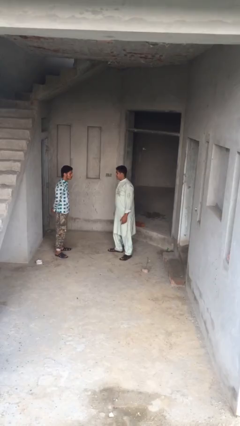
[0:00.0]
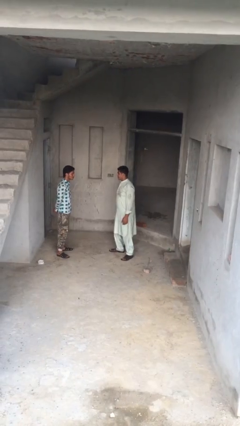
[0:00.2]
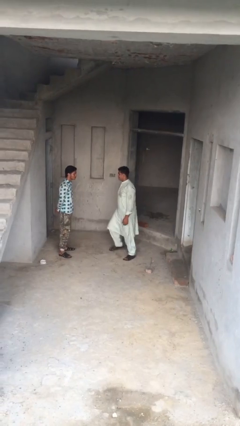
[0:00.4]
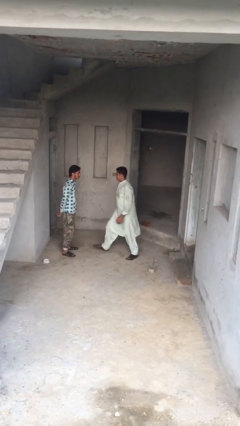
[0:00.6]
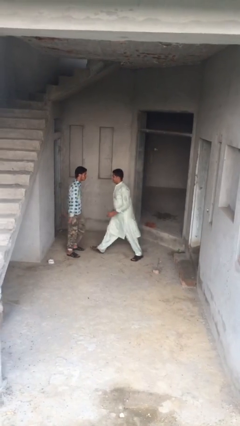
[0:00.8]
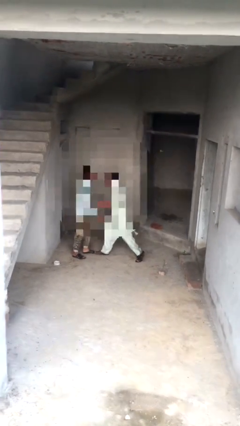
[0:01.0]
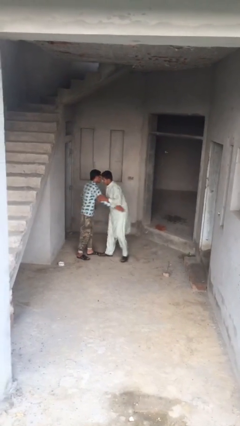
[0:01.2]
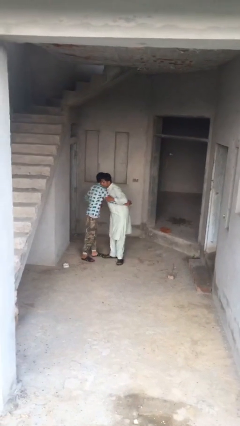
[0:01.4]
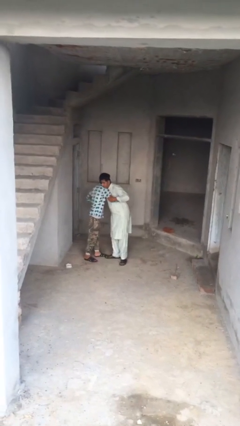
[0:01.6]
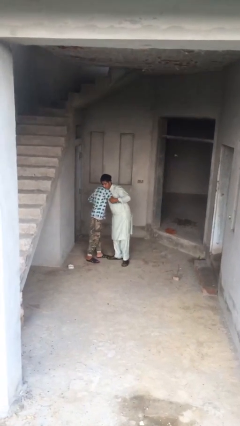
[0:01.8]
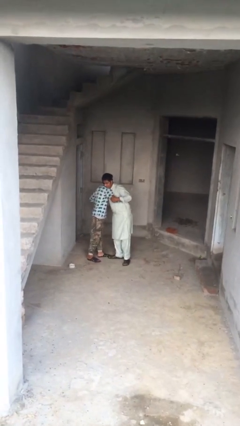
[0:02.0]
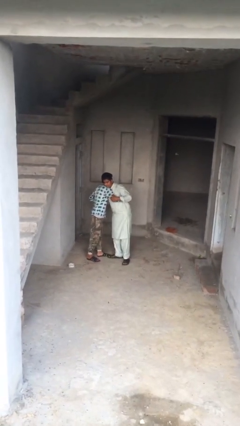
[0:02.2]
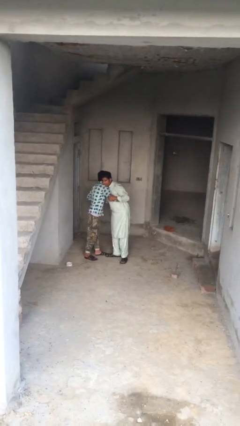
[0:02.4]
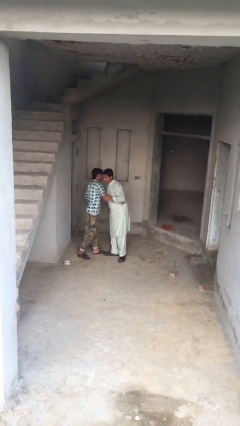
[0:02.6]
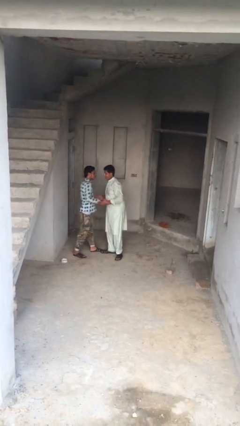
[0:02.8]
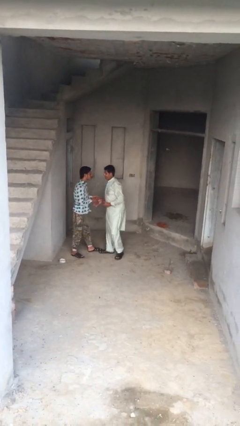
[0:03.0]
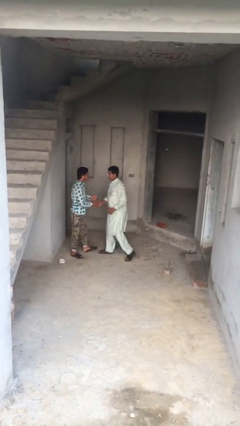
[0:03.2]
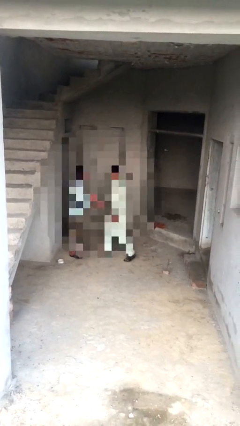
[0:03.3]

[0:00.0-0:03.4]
person embraces person

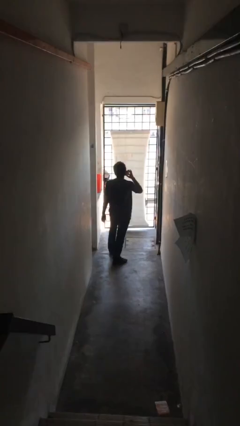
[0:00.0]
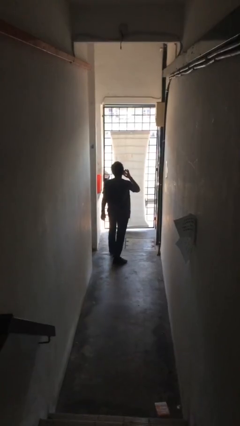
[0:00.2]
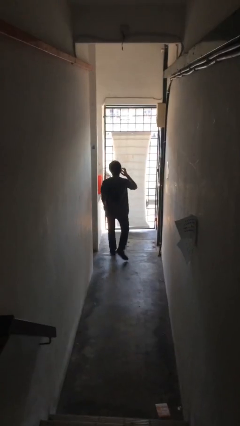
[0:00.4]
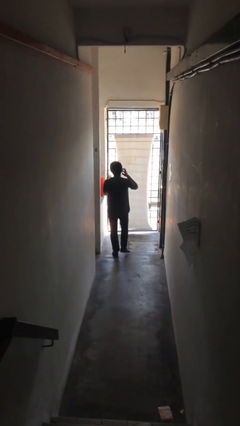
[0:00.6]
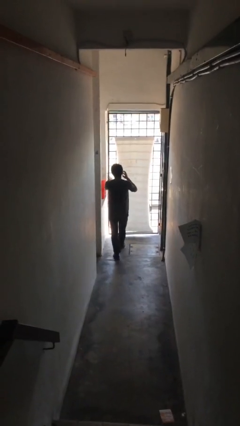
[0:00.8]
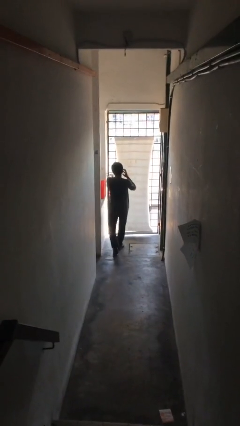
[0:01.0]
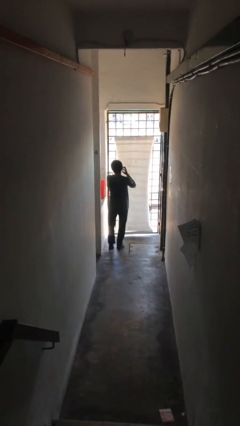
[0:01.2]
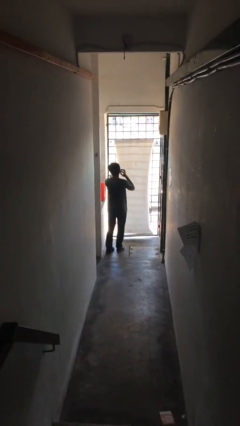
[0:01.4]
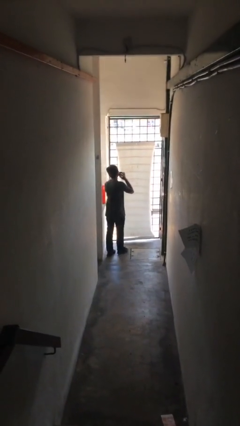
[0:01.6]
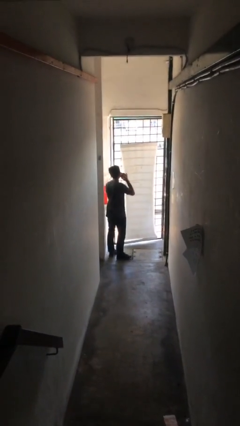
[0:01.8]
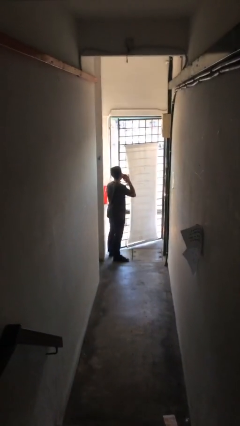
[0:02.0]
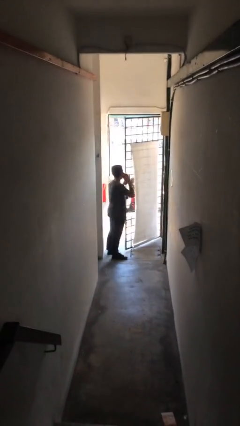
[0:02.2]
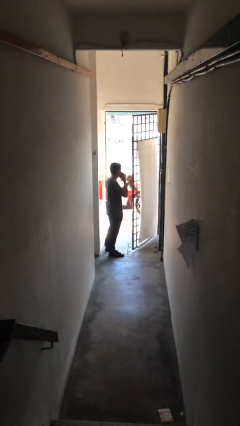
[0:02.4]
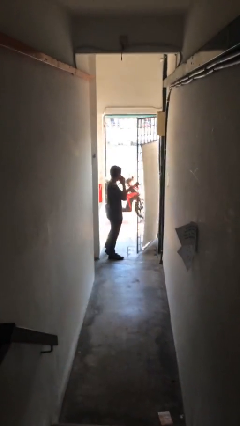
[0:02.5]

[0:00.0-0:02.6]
person opens facility door

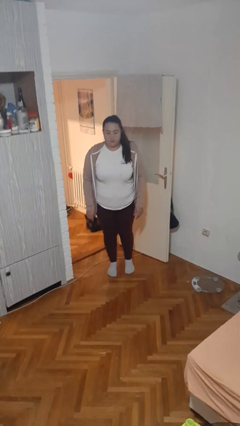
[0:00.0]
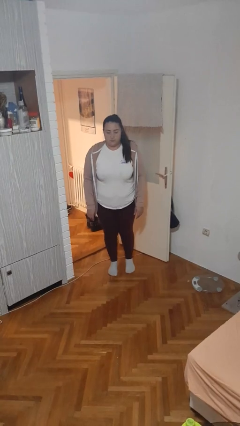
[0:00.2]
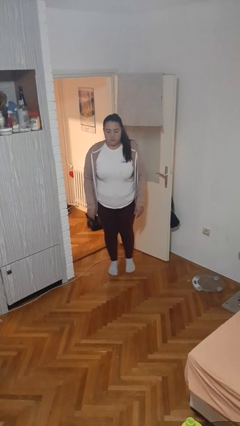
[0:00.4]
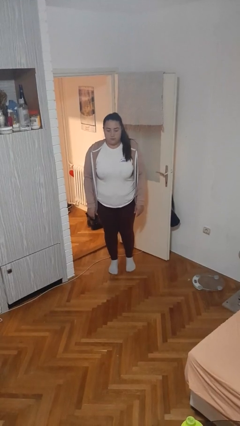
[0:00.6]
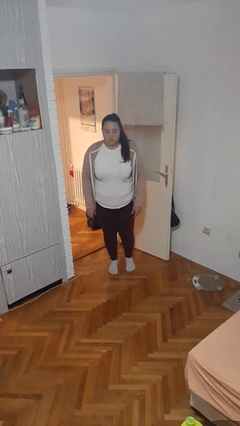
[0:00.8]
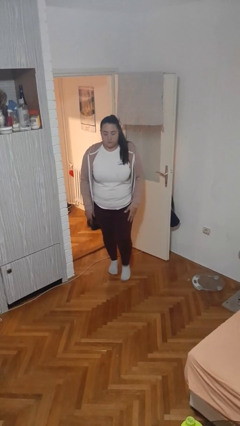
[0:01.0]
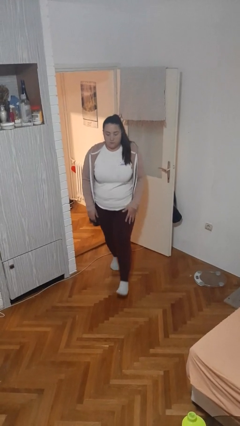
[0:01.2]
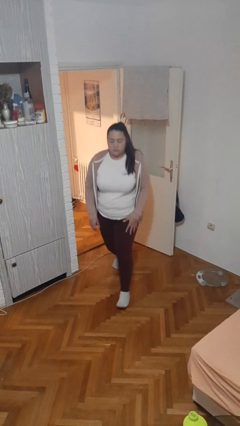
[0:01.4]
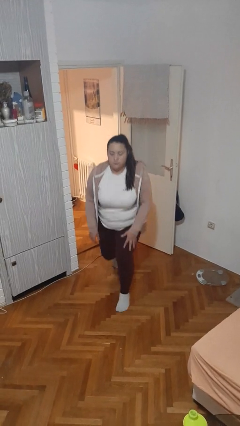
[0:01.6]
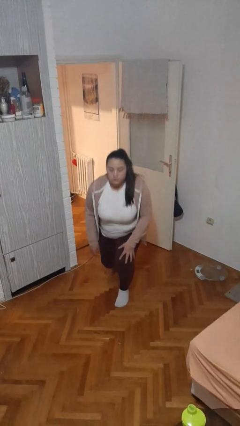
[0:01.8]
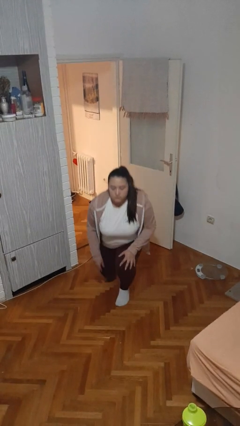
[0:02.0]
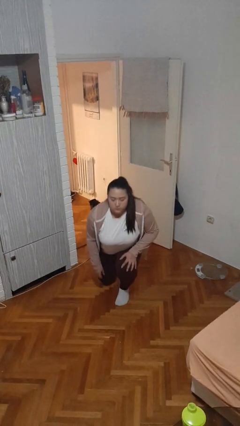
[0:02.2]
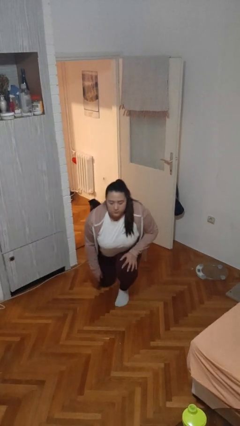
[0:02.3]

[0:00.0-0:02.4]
person kneels

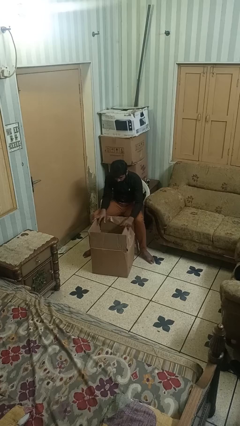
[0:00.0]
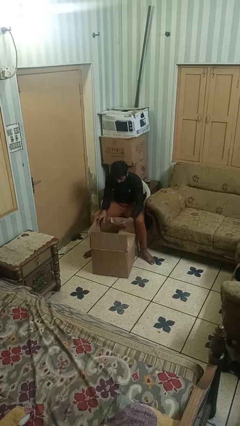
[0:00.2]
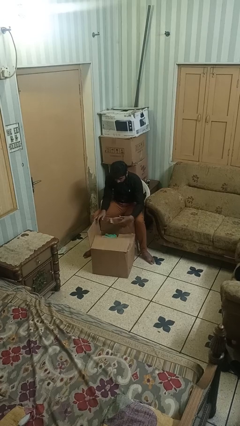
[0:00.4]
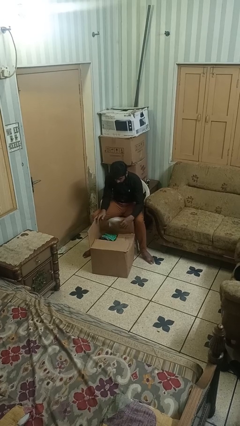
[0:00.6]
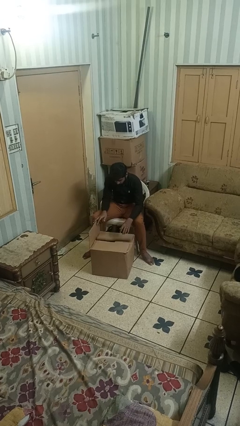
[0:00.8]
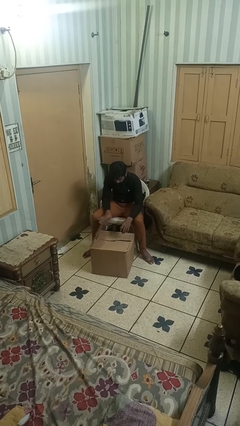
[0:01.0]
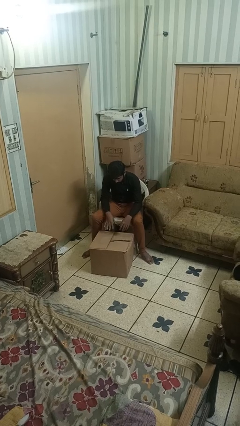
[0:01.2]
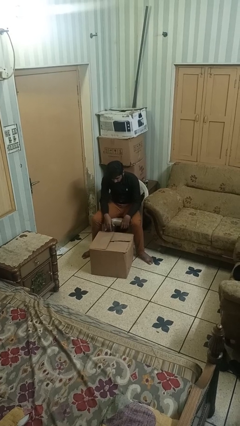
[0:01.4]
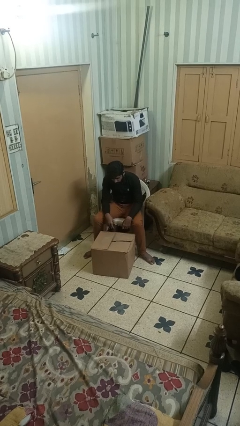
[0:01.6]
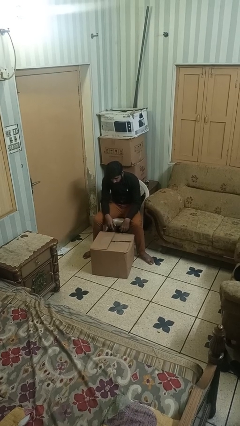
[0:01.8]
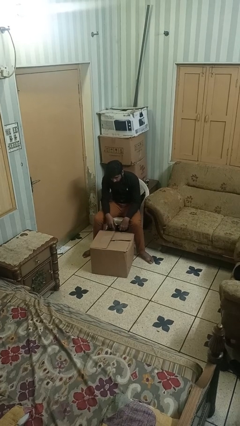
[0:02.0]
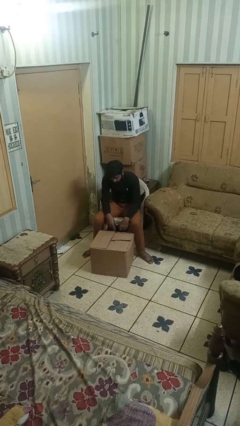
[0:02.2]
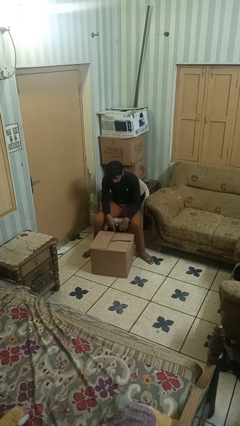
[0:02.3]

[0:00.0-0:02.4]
person closes box

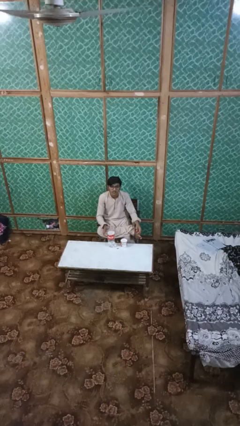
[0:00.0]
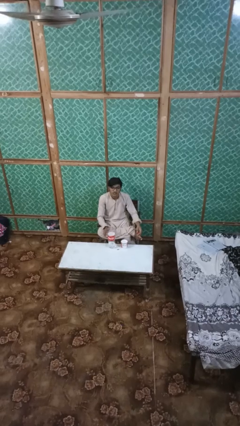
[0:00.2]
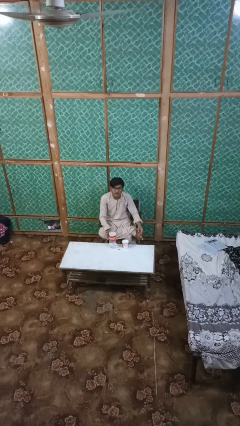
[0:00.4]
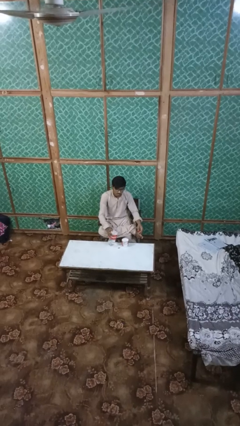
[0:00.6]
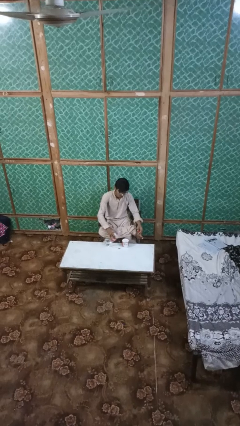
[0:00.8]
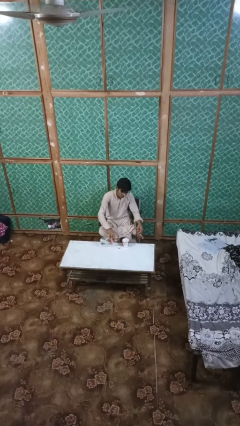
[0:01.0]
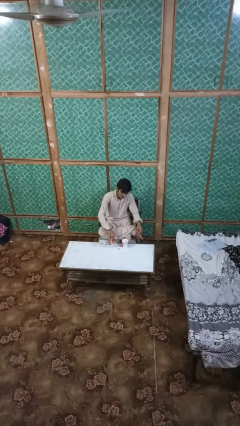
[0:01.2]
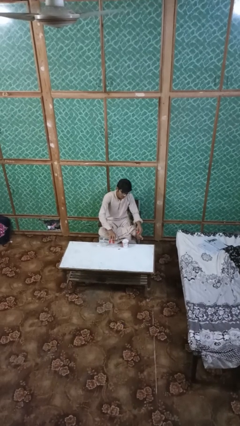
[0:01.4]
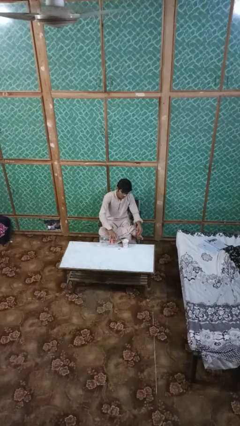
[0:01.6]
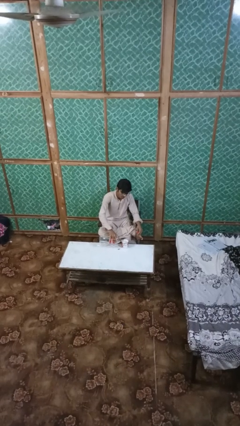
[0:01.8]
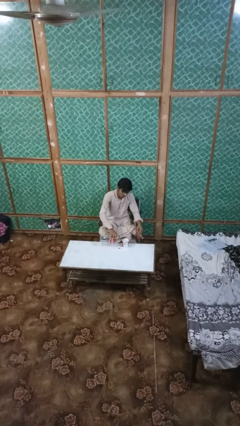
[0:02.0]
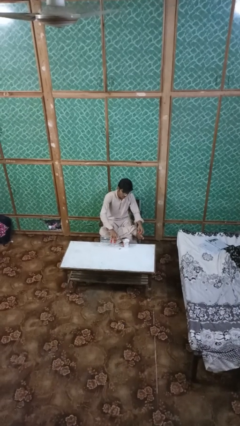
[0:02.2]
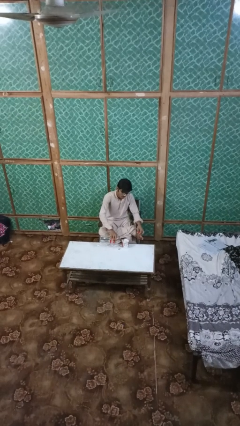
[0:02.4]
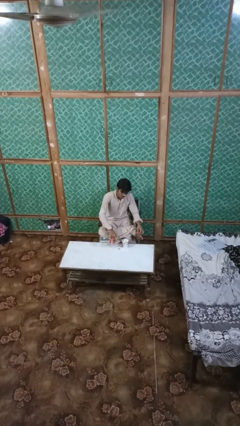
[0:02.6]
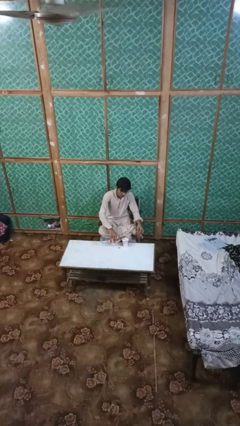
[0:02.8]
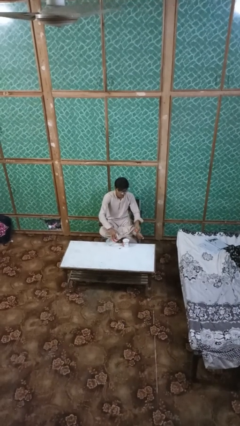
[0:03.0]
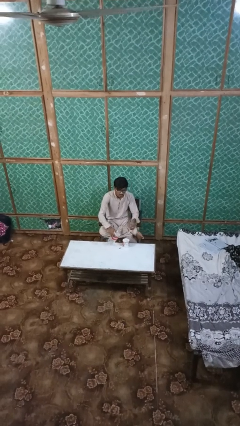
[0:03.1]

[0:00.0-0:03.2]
person pours liquid into cup

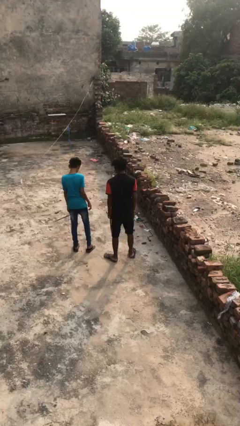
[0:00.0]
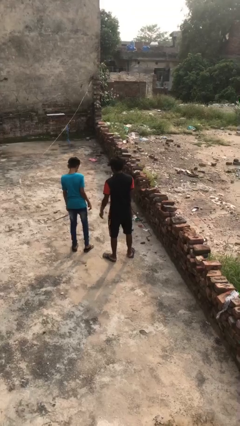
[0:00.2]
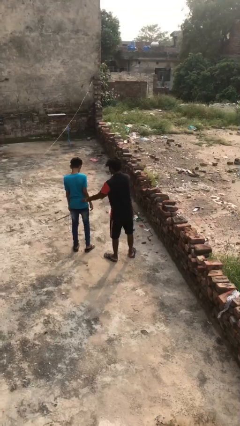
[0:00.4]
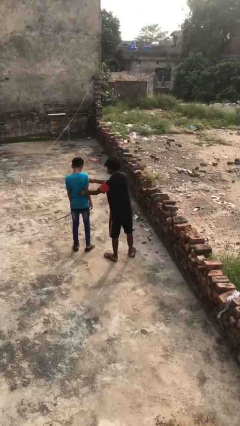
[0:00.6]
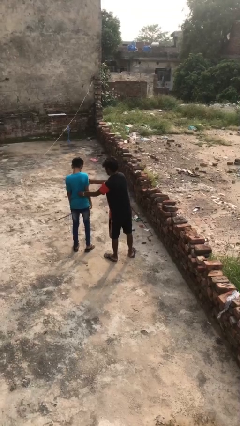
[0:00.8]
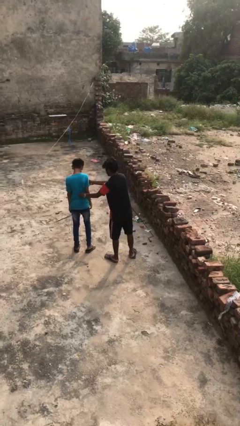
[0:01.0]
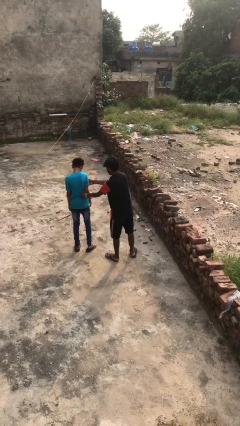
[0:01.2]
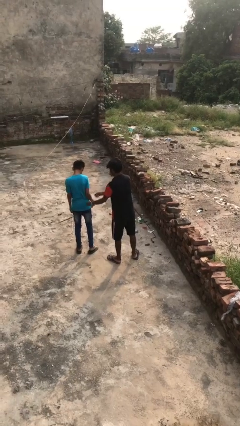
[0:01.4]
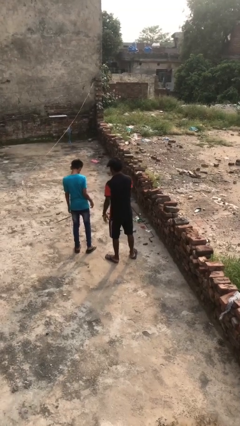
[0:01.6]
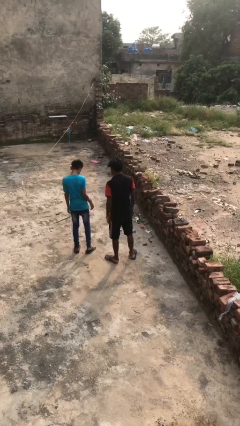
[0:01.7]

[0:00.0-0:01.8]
person tickles person

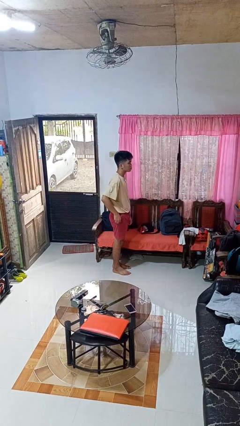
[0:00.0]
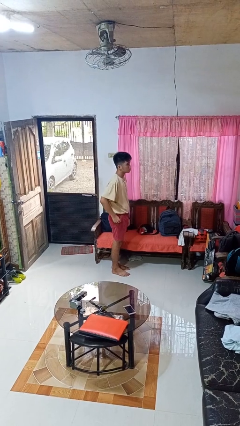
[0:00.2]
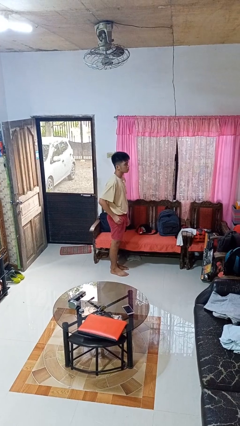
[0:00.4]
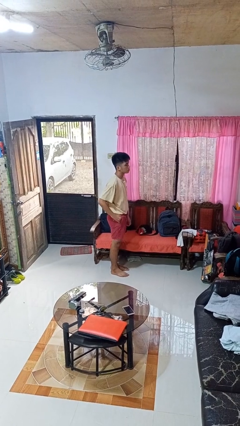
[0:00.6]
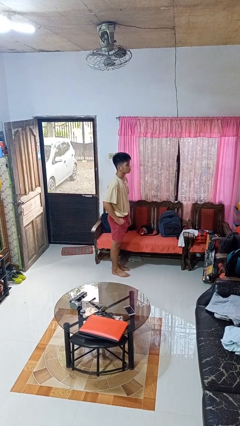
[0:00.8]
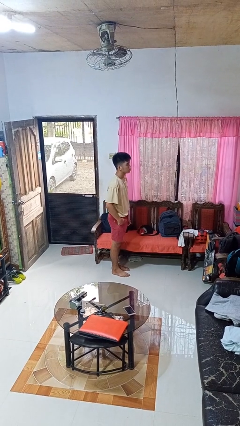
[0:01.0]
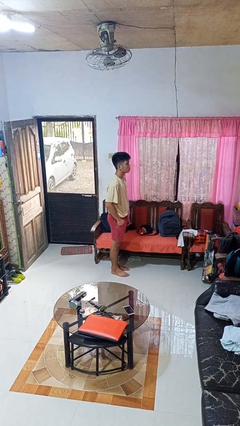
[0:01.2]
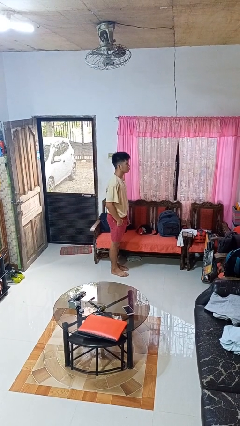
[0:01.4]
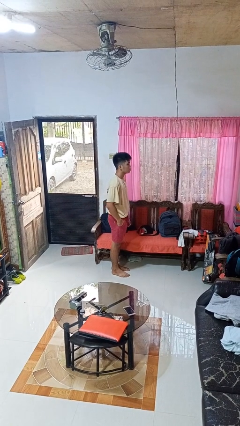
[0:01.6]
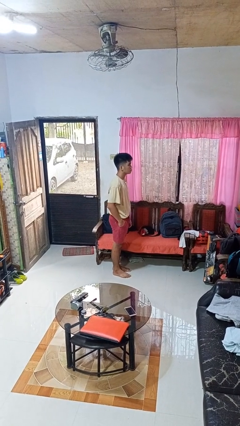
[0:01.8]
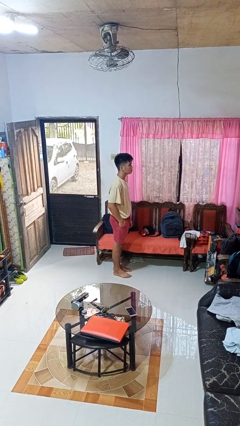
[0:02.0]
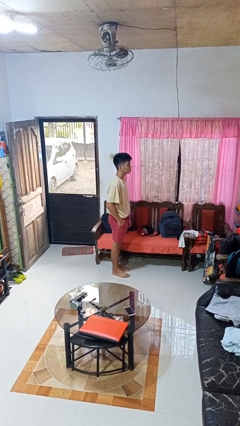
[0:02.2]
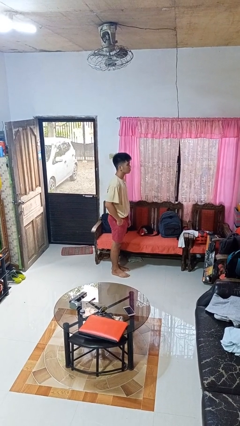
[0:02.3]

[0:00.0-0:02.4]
person puts hands in back pockets
